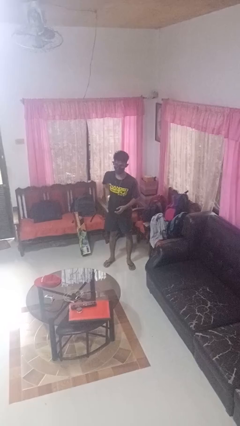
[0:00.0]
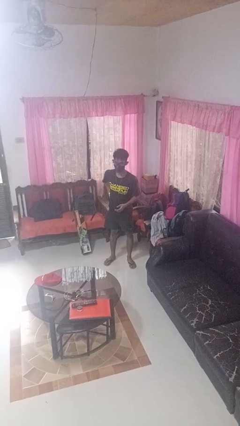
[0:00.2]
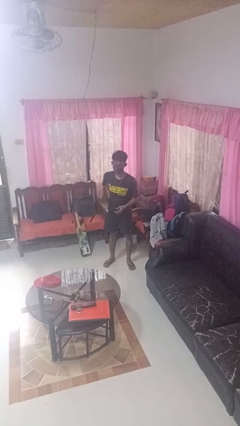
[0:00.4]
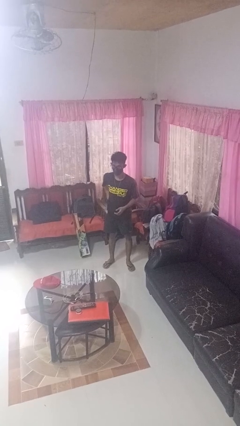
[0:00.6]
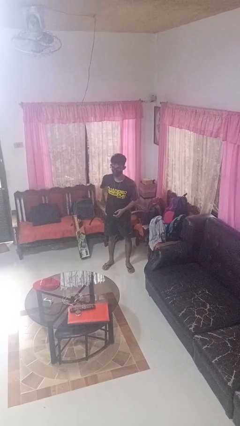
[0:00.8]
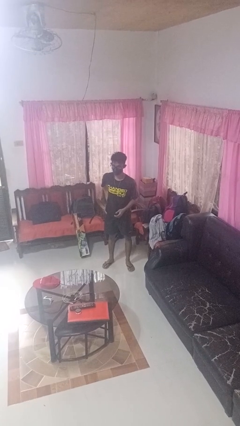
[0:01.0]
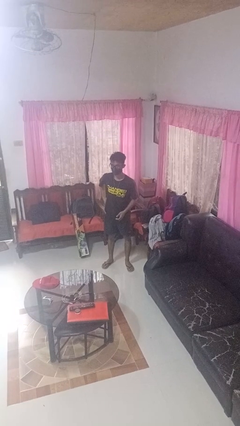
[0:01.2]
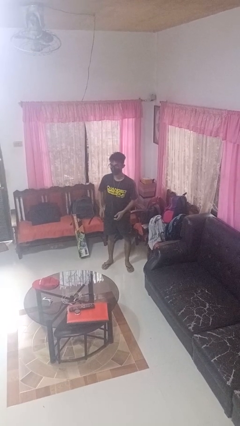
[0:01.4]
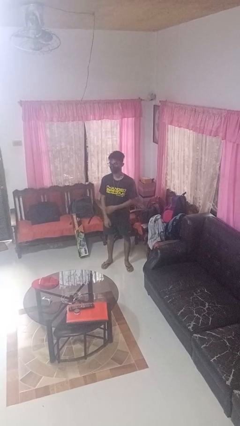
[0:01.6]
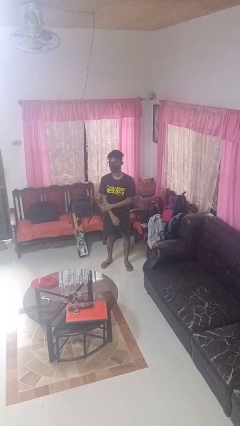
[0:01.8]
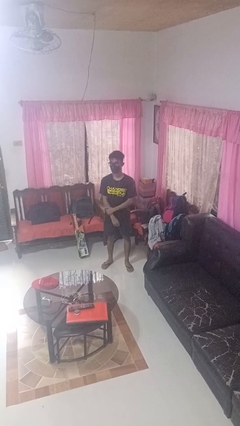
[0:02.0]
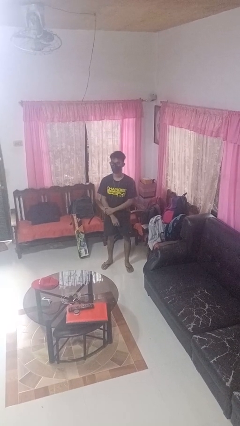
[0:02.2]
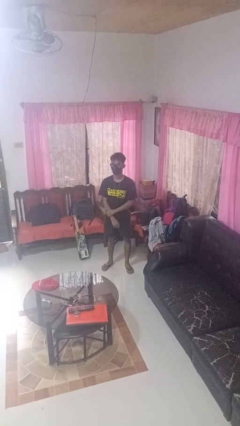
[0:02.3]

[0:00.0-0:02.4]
person puts phone into pocket

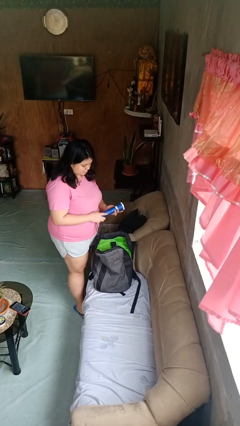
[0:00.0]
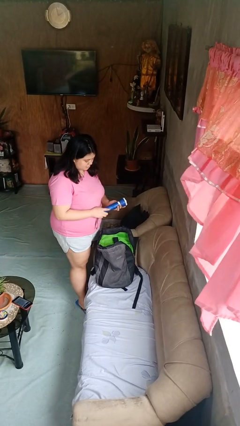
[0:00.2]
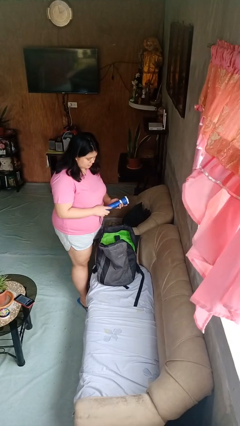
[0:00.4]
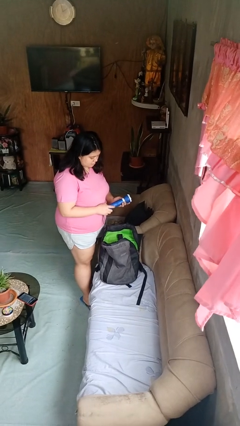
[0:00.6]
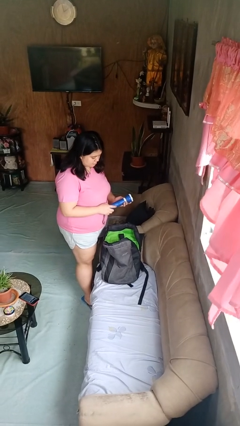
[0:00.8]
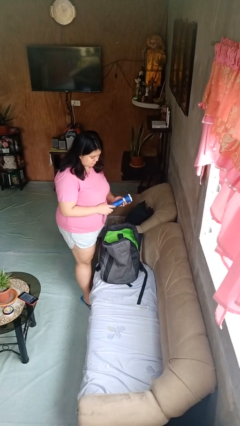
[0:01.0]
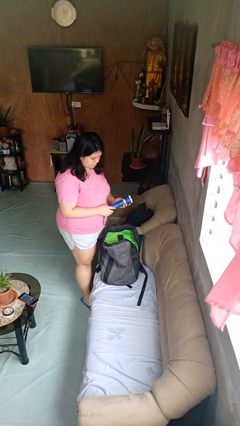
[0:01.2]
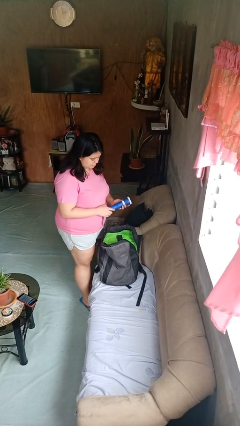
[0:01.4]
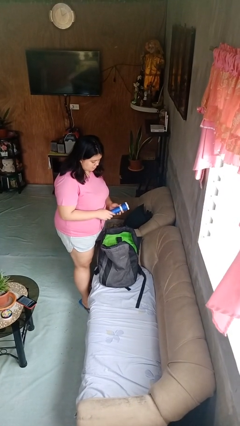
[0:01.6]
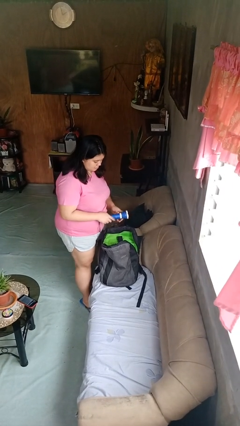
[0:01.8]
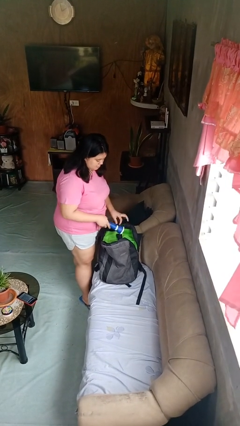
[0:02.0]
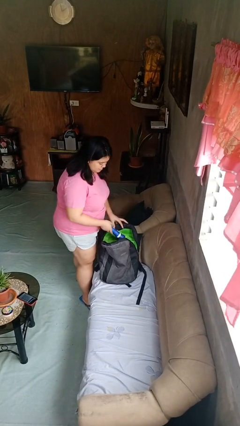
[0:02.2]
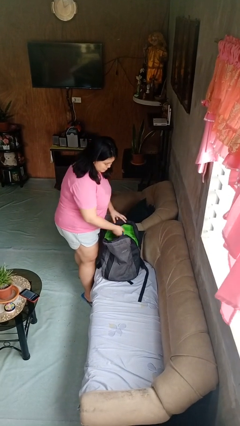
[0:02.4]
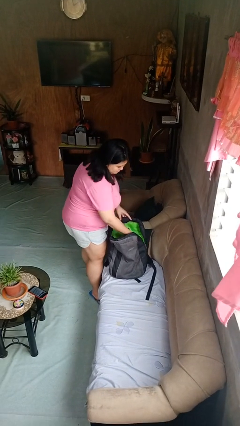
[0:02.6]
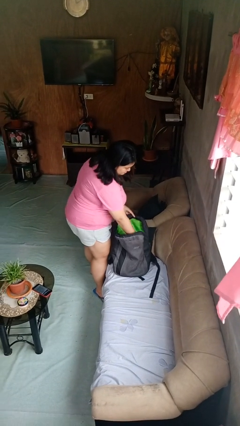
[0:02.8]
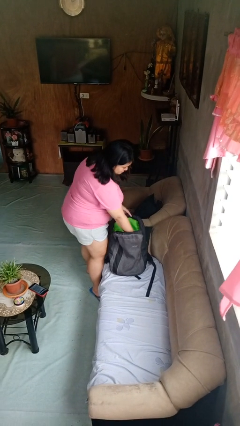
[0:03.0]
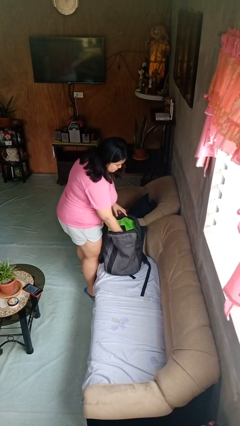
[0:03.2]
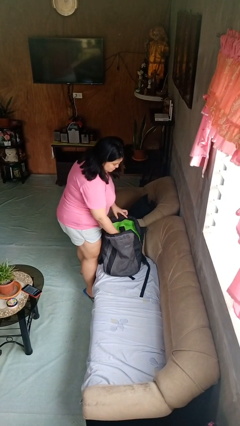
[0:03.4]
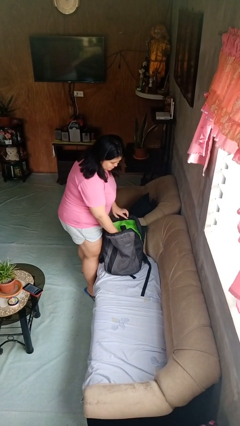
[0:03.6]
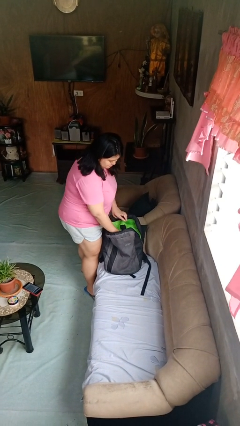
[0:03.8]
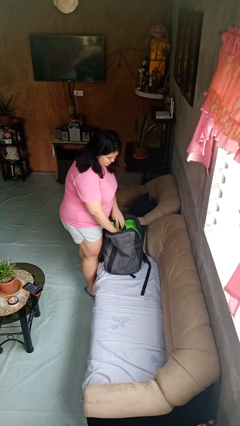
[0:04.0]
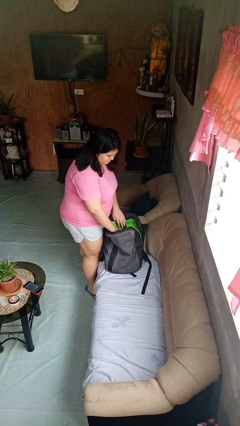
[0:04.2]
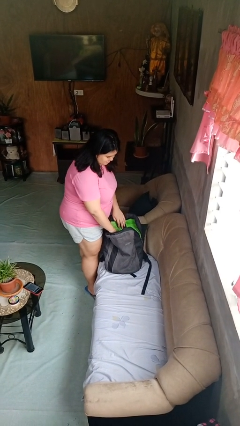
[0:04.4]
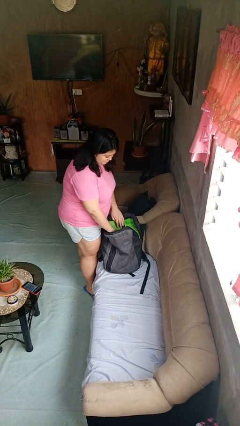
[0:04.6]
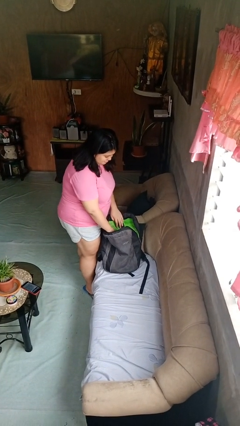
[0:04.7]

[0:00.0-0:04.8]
person puts object into backpack

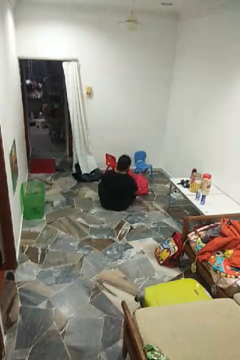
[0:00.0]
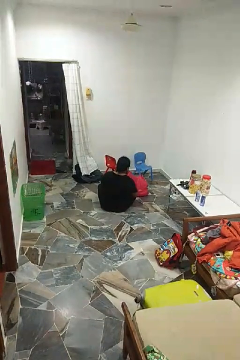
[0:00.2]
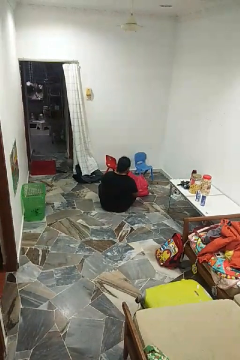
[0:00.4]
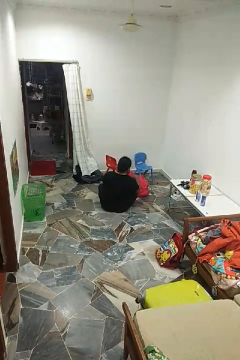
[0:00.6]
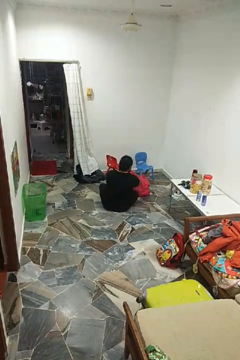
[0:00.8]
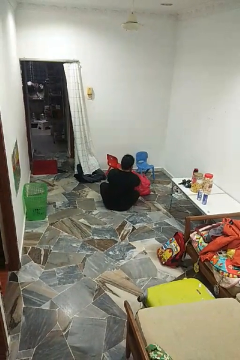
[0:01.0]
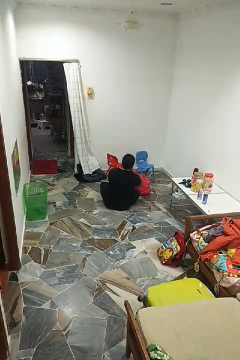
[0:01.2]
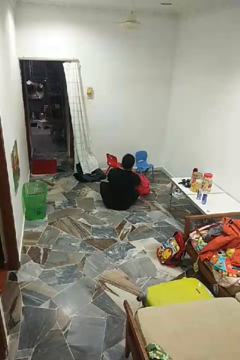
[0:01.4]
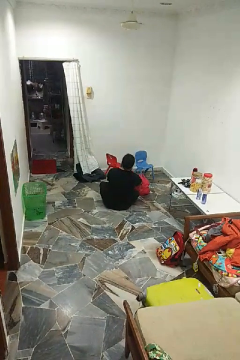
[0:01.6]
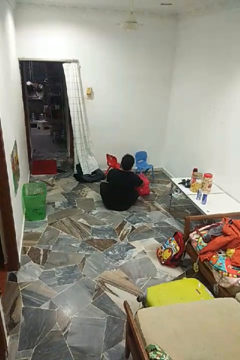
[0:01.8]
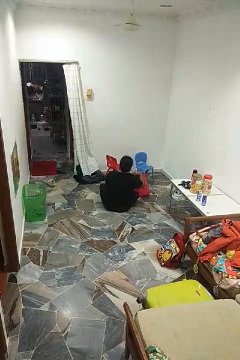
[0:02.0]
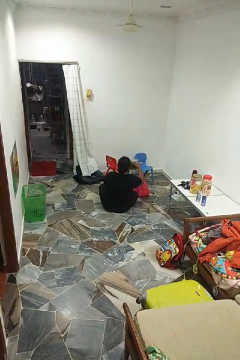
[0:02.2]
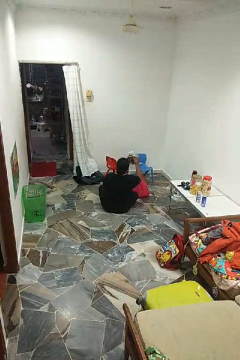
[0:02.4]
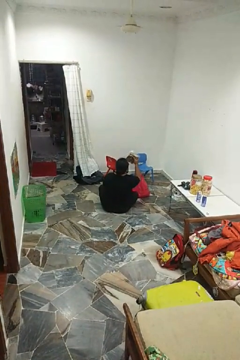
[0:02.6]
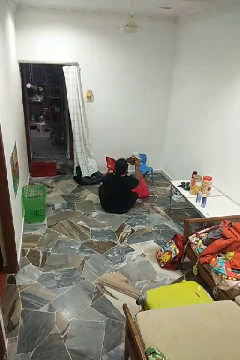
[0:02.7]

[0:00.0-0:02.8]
person takes object from bag

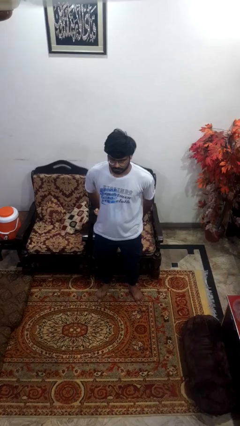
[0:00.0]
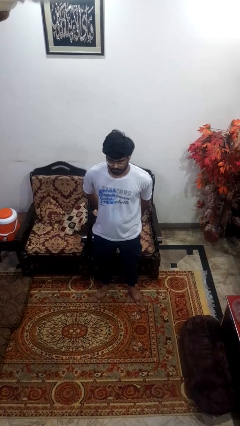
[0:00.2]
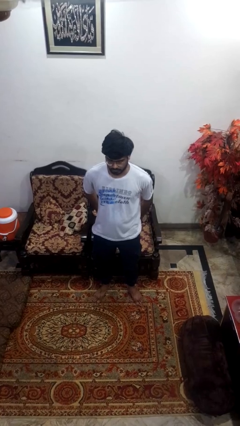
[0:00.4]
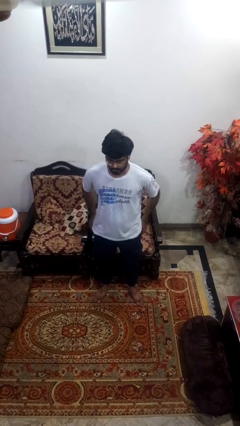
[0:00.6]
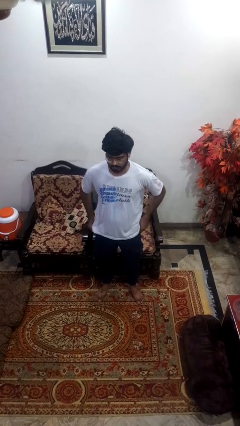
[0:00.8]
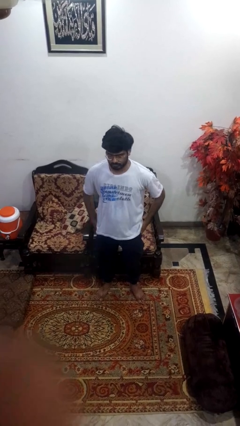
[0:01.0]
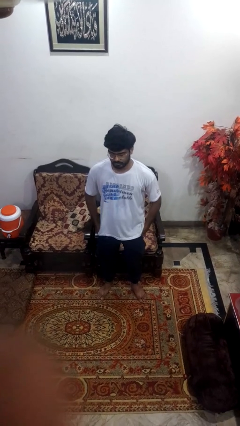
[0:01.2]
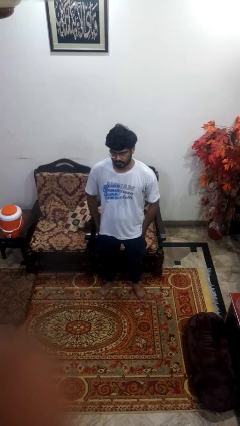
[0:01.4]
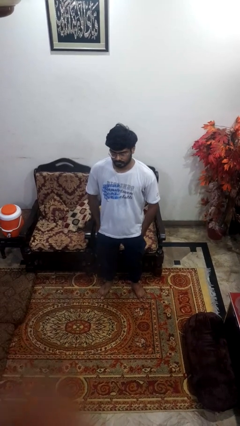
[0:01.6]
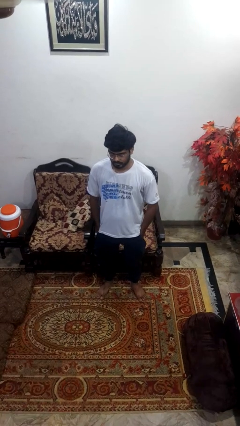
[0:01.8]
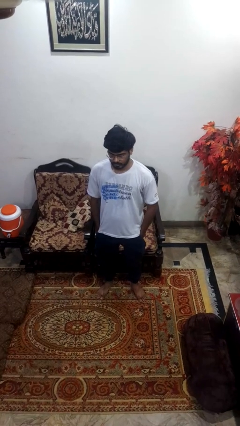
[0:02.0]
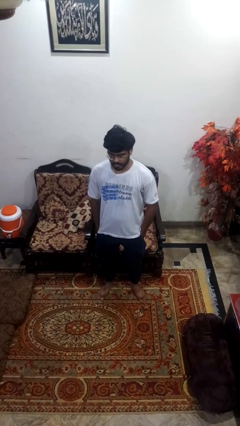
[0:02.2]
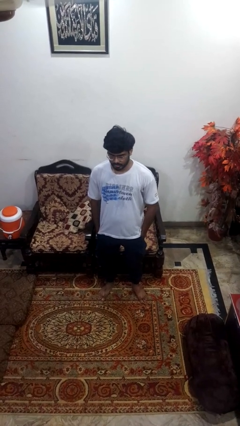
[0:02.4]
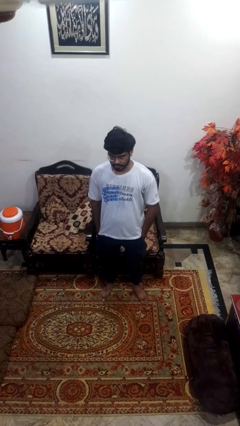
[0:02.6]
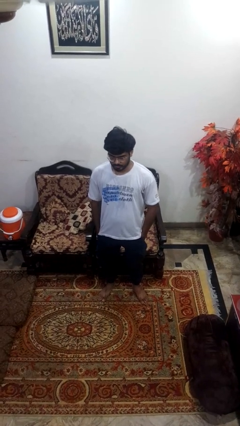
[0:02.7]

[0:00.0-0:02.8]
person puts hands in back pockets

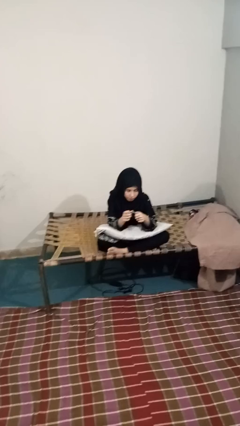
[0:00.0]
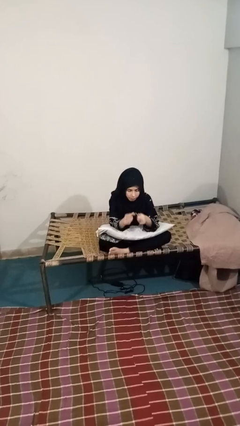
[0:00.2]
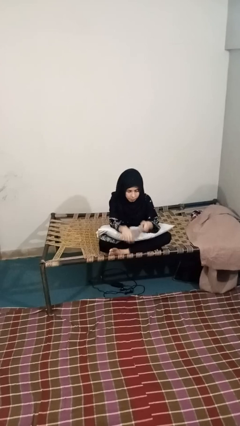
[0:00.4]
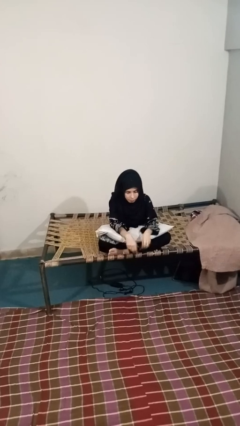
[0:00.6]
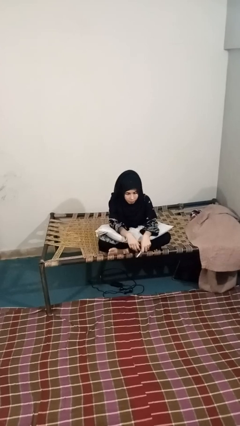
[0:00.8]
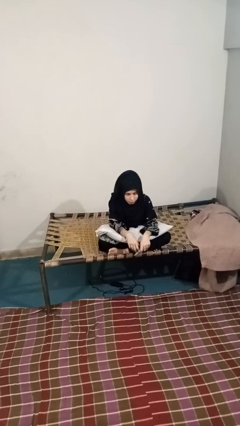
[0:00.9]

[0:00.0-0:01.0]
person files fingernails

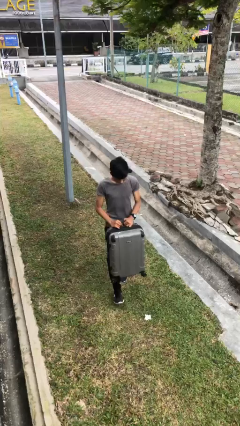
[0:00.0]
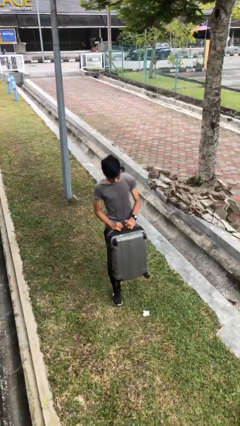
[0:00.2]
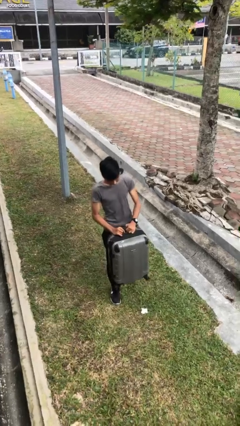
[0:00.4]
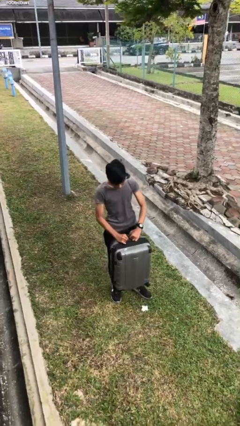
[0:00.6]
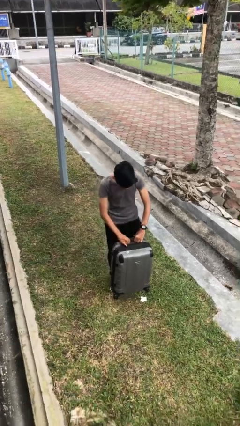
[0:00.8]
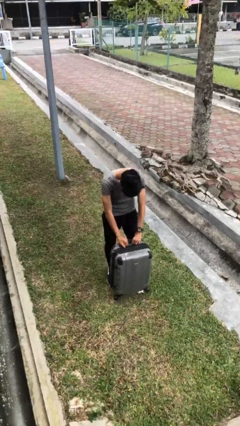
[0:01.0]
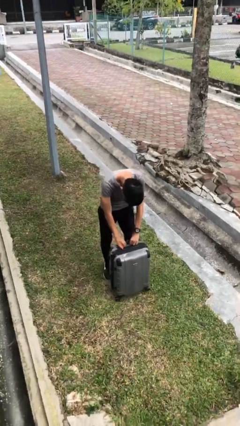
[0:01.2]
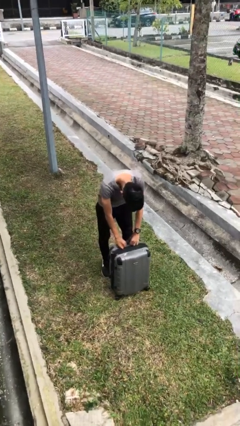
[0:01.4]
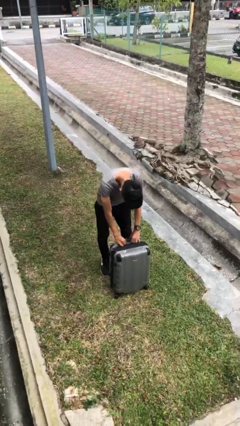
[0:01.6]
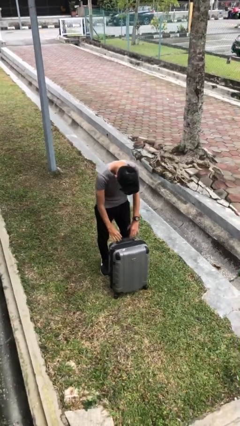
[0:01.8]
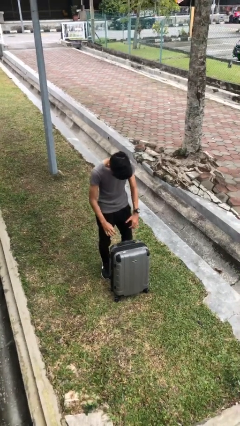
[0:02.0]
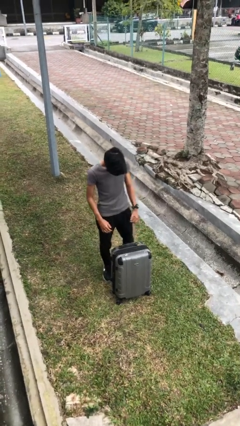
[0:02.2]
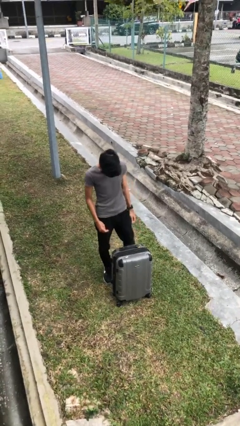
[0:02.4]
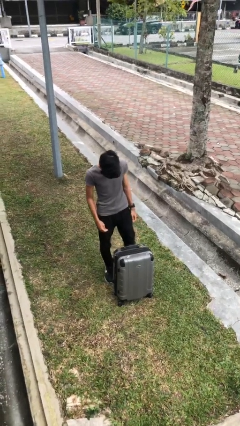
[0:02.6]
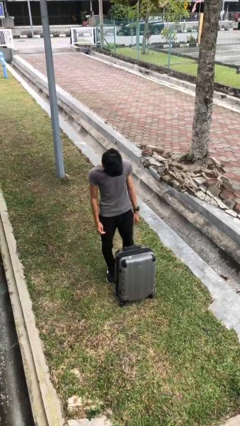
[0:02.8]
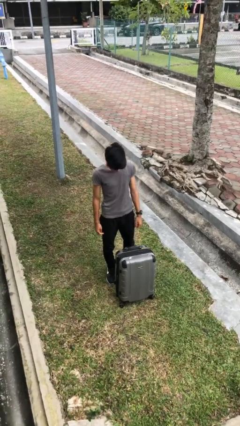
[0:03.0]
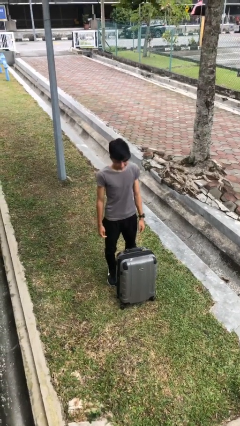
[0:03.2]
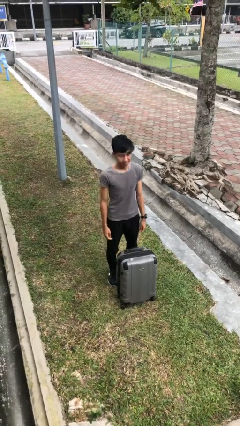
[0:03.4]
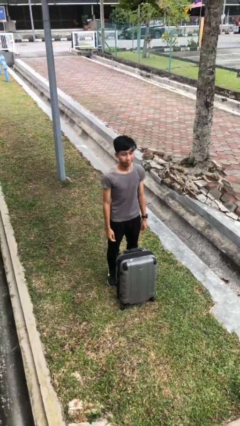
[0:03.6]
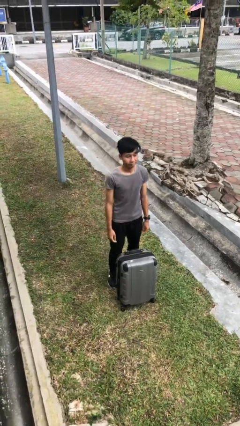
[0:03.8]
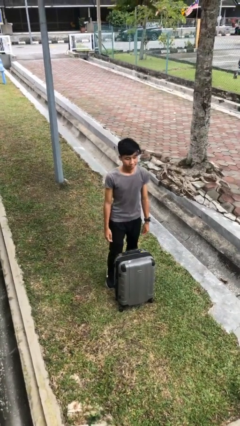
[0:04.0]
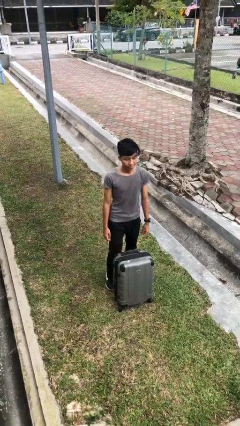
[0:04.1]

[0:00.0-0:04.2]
person puts down object on floor

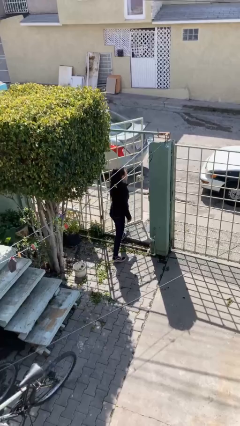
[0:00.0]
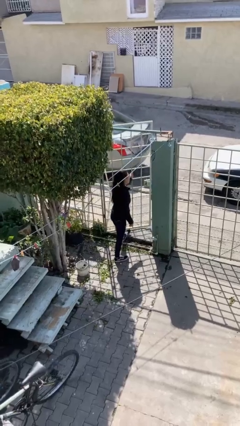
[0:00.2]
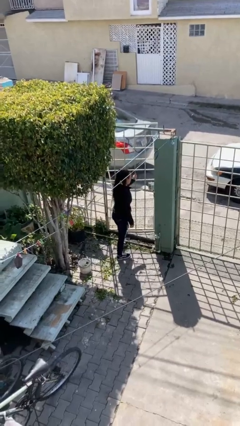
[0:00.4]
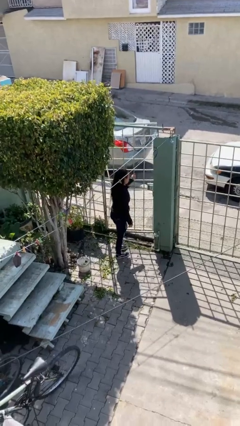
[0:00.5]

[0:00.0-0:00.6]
person closes facility door
